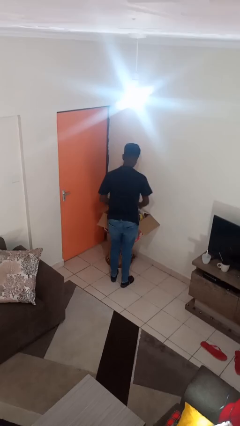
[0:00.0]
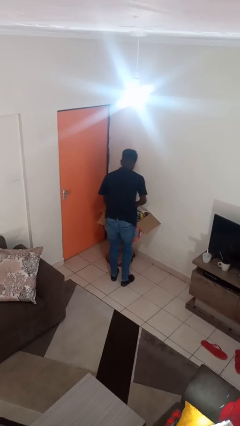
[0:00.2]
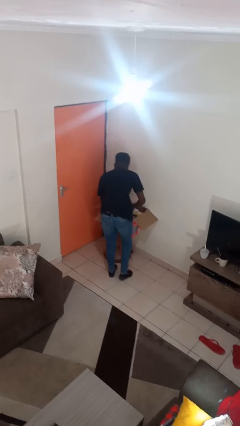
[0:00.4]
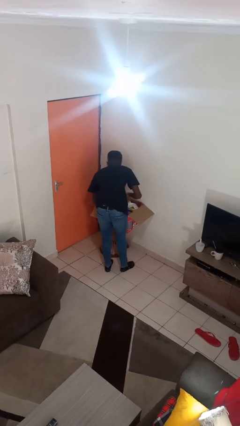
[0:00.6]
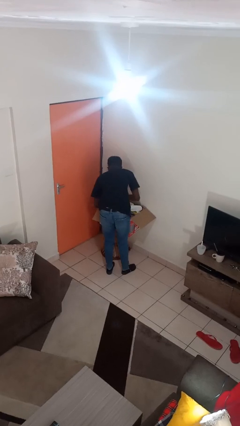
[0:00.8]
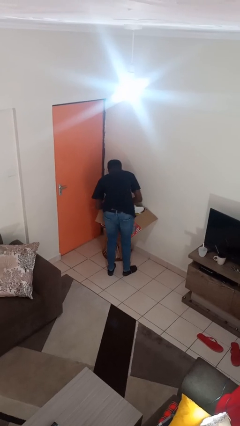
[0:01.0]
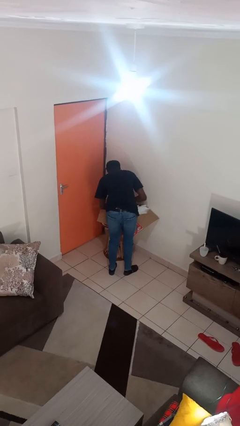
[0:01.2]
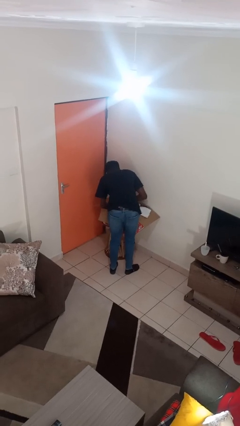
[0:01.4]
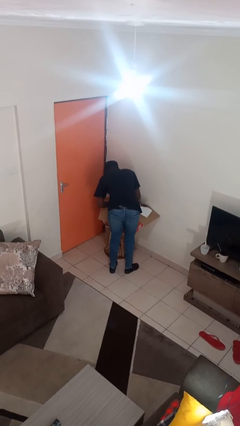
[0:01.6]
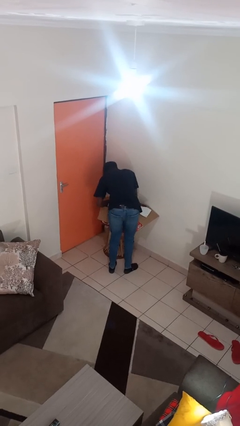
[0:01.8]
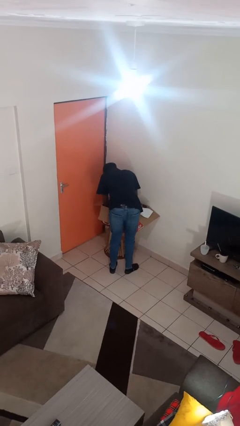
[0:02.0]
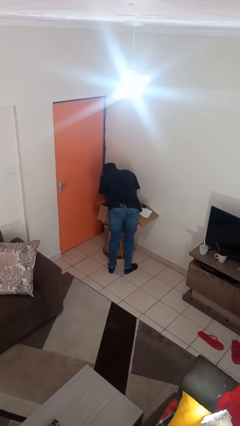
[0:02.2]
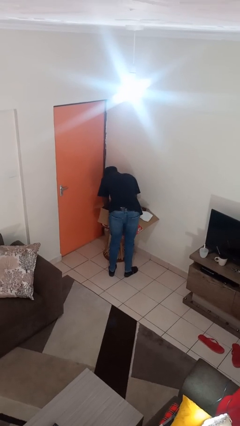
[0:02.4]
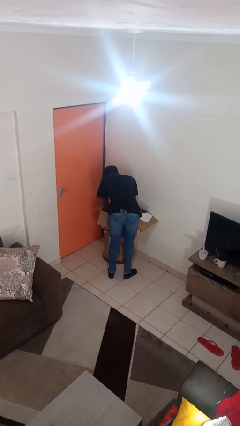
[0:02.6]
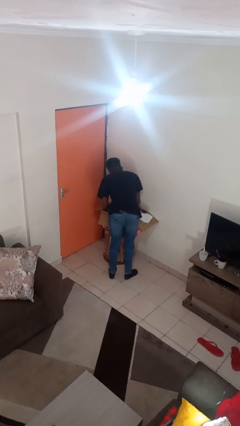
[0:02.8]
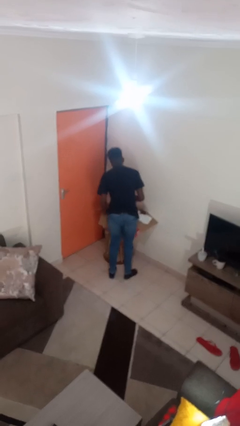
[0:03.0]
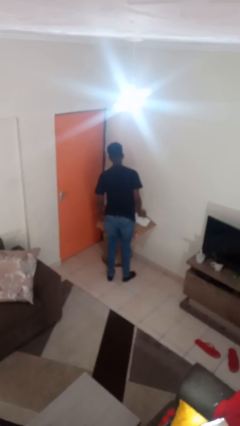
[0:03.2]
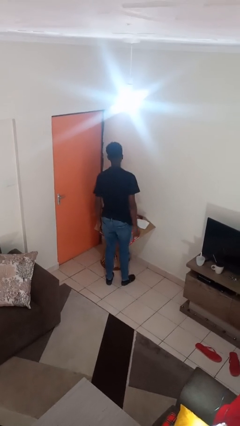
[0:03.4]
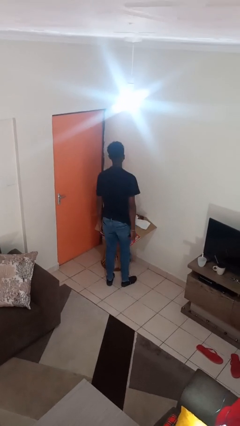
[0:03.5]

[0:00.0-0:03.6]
person searches in box

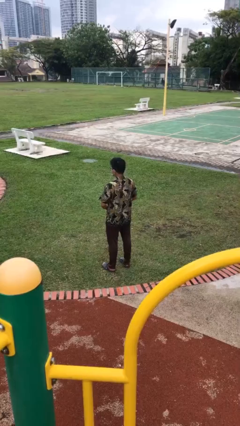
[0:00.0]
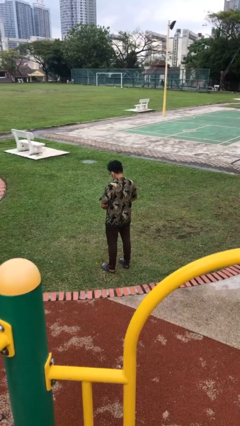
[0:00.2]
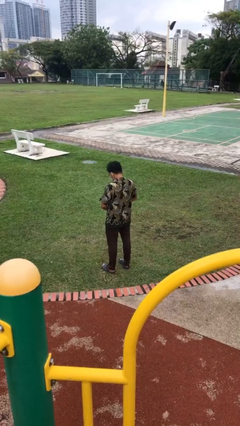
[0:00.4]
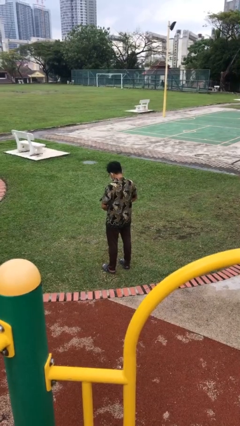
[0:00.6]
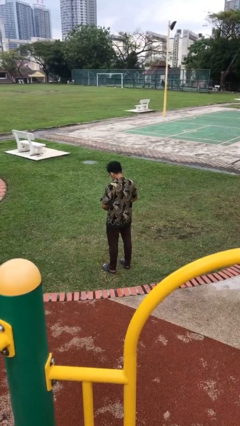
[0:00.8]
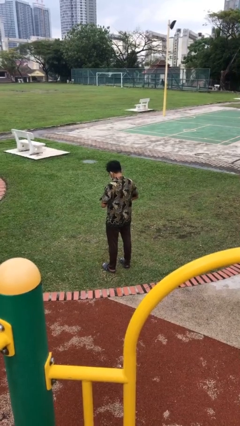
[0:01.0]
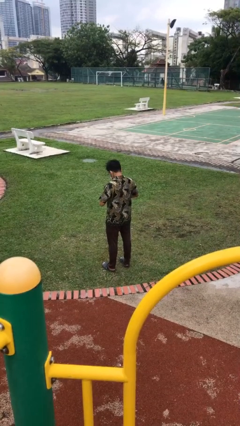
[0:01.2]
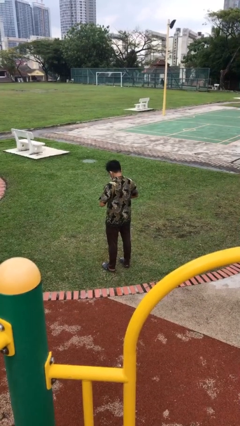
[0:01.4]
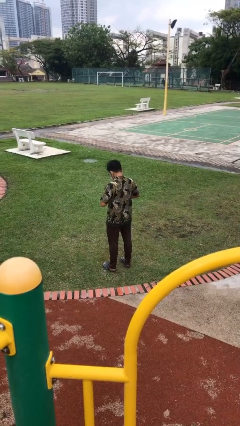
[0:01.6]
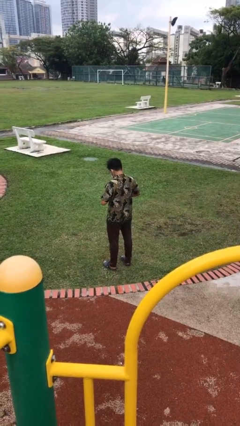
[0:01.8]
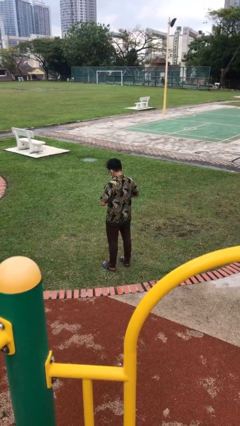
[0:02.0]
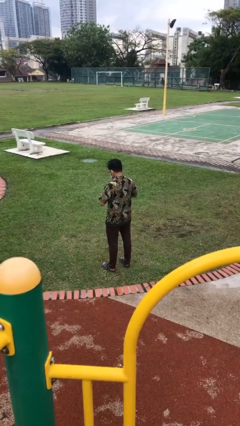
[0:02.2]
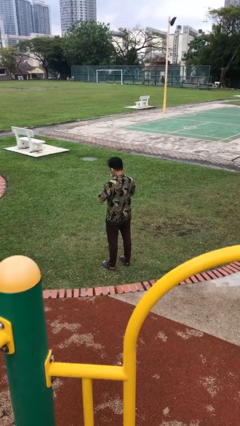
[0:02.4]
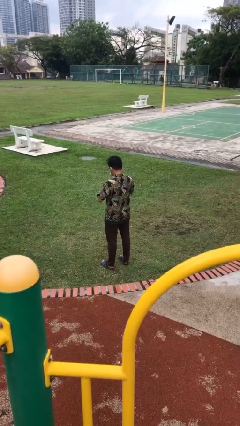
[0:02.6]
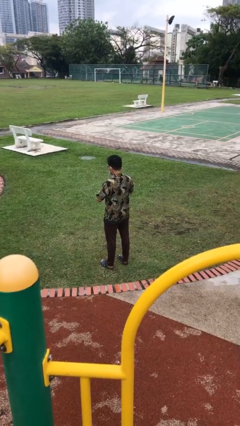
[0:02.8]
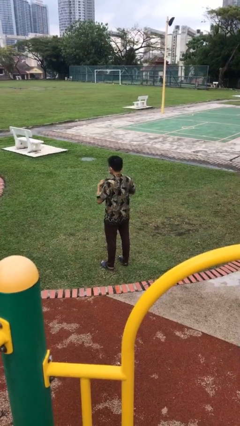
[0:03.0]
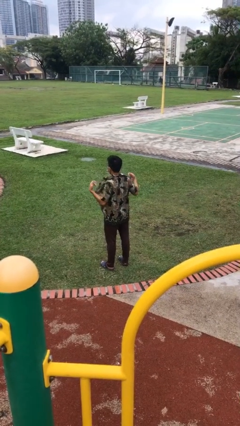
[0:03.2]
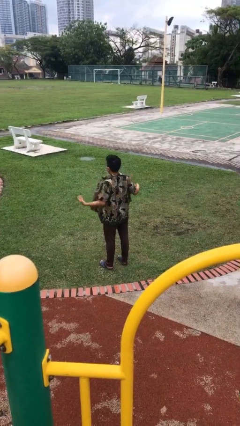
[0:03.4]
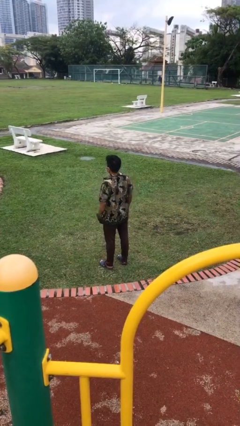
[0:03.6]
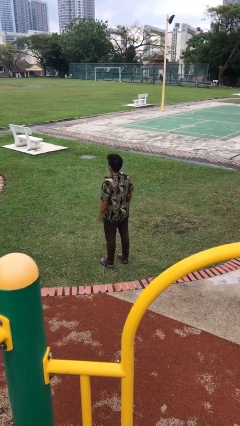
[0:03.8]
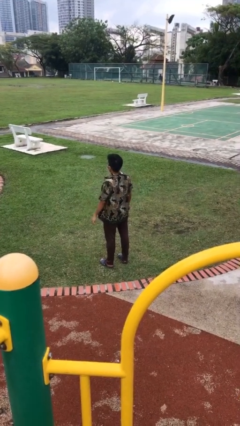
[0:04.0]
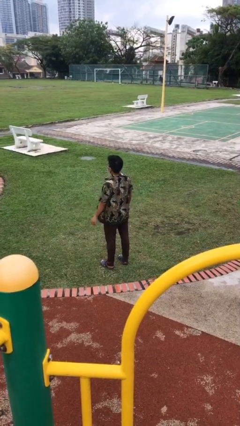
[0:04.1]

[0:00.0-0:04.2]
person unbuttons shirt

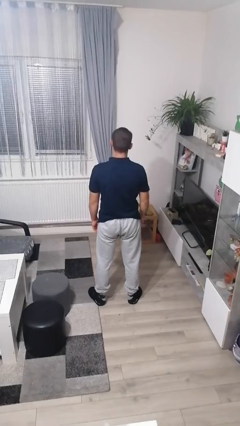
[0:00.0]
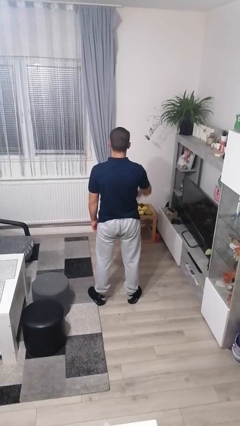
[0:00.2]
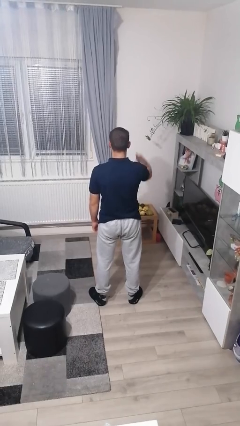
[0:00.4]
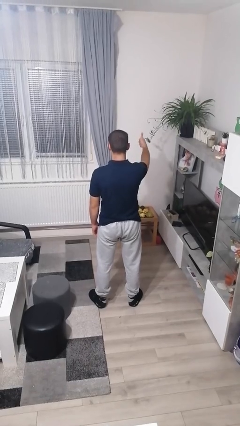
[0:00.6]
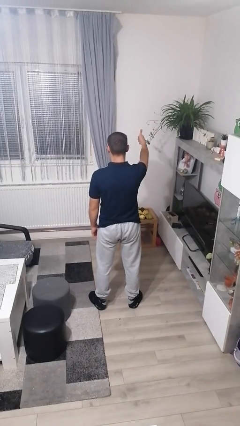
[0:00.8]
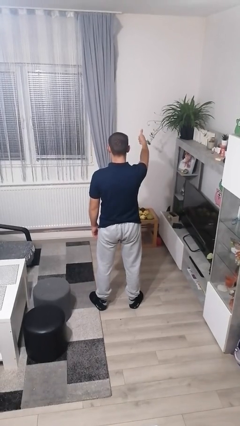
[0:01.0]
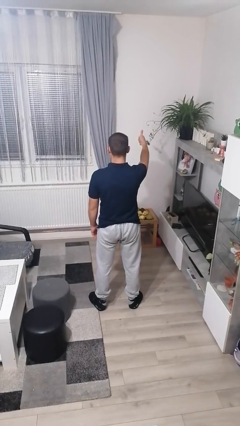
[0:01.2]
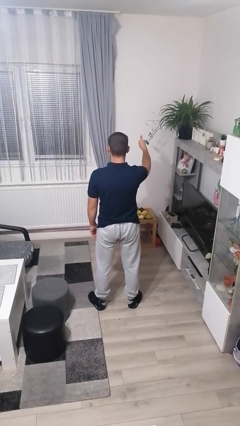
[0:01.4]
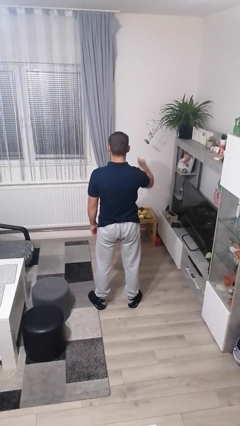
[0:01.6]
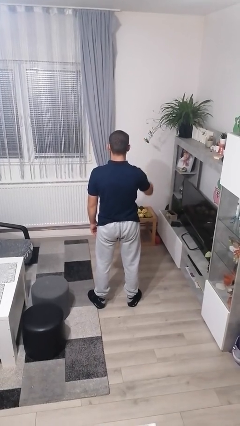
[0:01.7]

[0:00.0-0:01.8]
person gestures number one

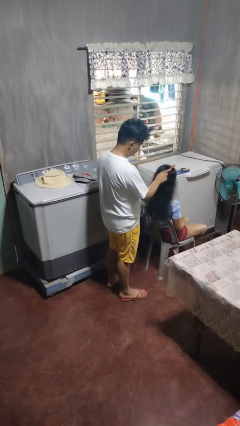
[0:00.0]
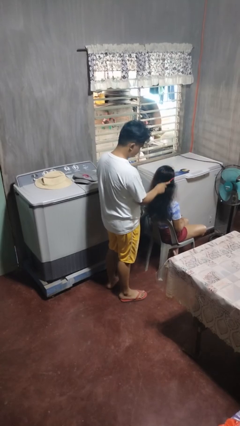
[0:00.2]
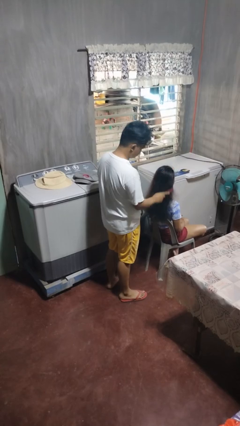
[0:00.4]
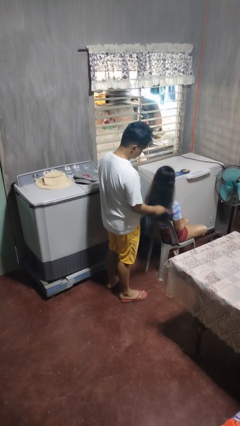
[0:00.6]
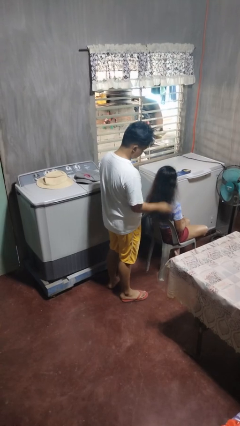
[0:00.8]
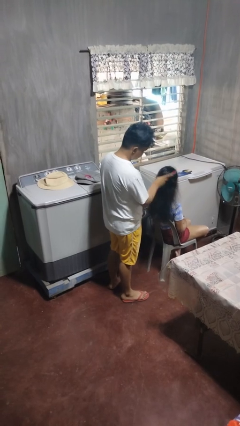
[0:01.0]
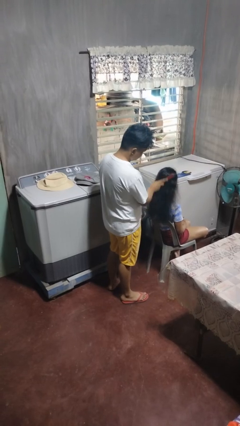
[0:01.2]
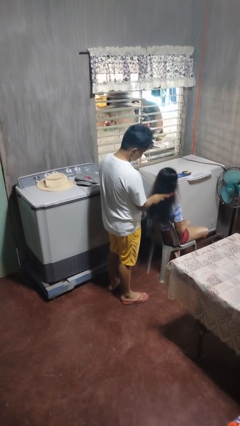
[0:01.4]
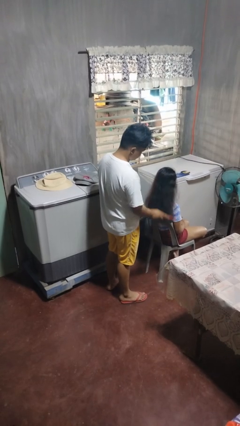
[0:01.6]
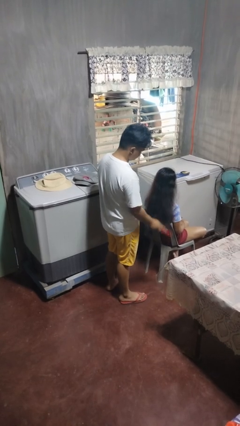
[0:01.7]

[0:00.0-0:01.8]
person brushes hair of person

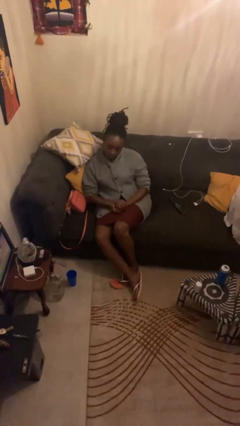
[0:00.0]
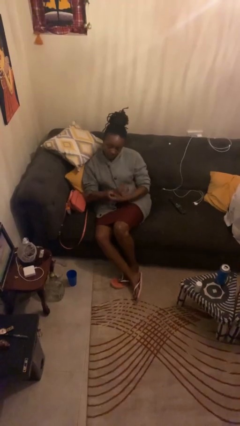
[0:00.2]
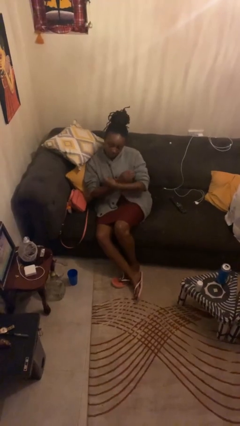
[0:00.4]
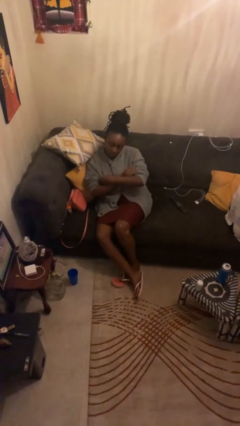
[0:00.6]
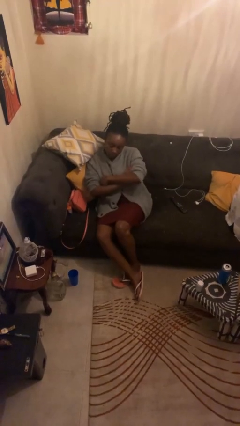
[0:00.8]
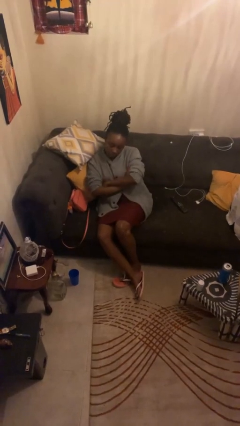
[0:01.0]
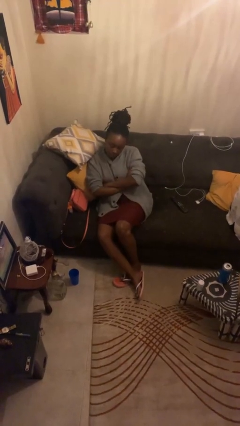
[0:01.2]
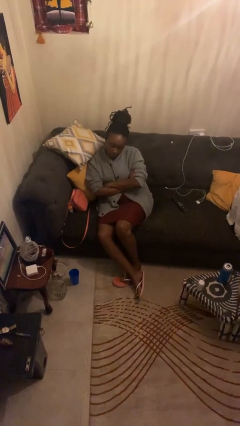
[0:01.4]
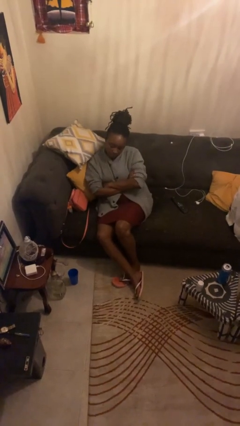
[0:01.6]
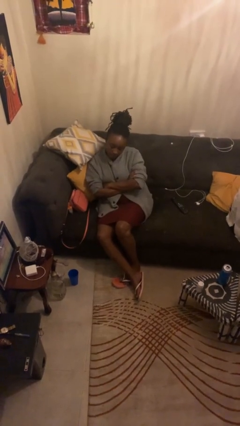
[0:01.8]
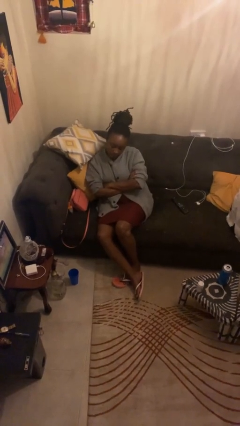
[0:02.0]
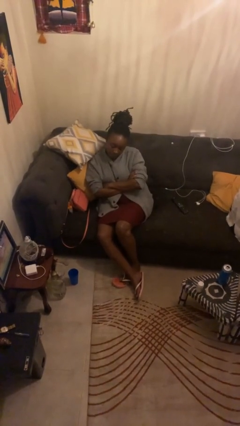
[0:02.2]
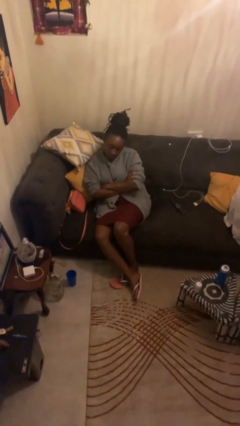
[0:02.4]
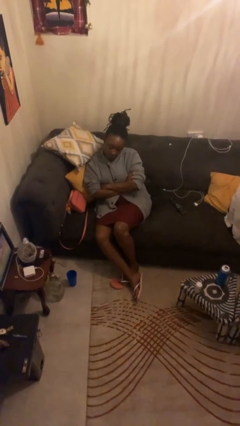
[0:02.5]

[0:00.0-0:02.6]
person crosses arms

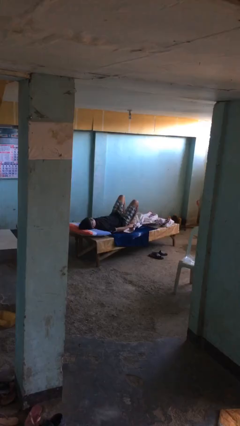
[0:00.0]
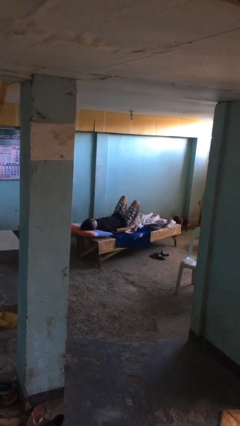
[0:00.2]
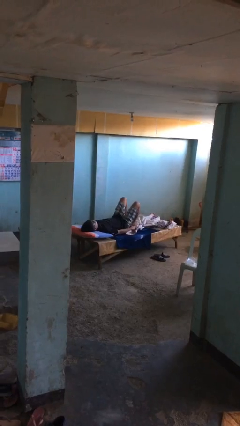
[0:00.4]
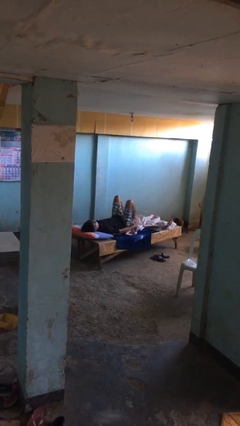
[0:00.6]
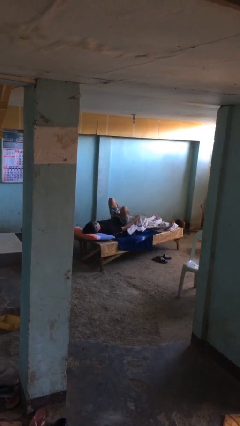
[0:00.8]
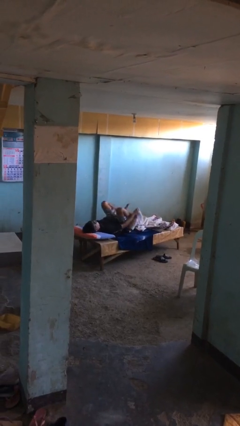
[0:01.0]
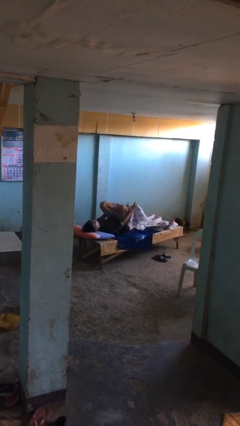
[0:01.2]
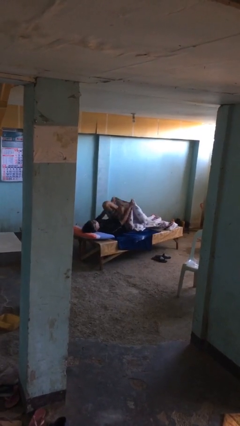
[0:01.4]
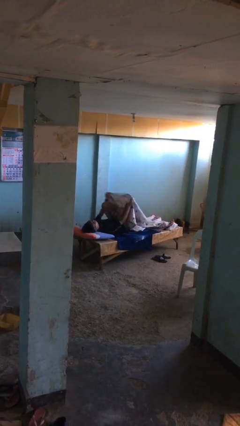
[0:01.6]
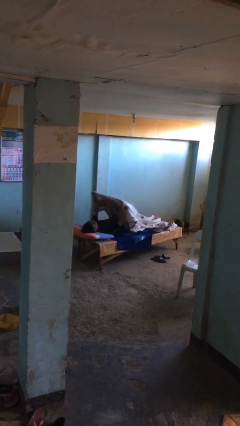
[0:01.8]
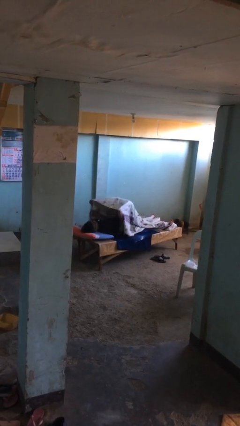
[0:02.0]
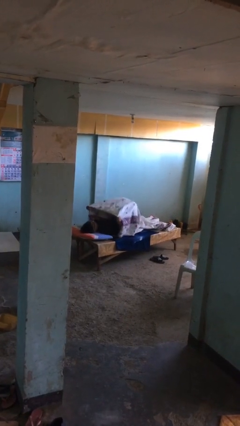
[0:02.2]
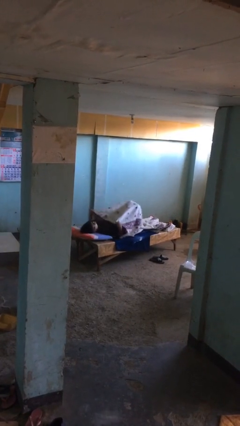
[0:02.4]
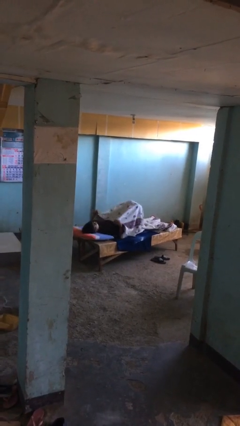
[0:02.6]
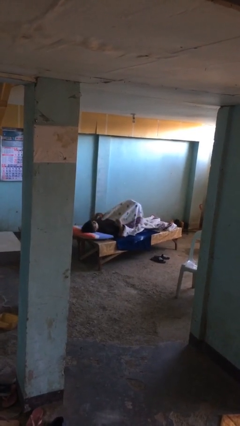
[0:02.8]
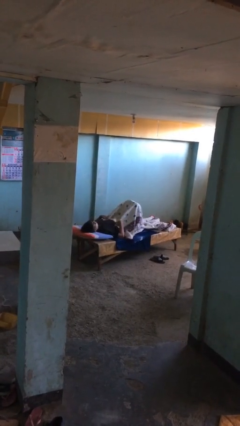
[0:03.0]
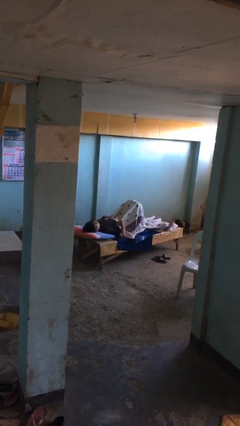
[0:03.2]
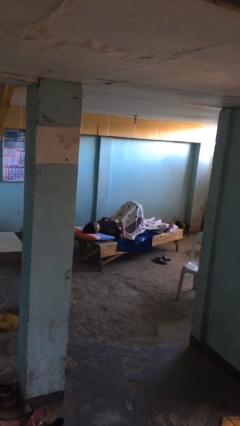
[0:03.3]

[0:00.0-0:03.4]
person covers with bedsheets
